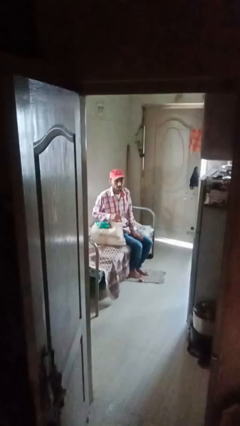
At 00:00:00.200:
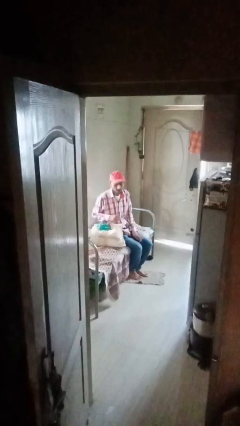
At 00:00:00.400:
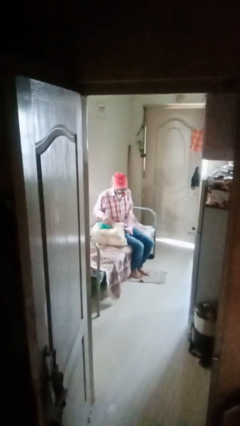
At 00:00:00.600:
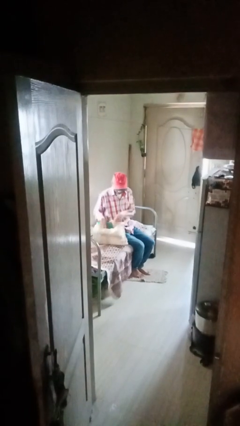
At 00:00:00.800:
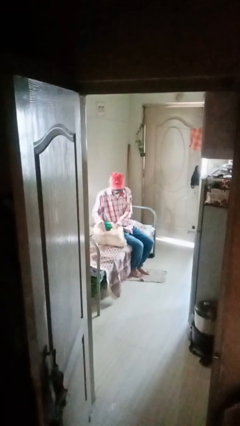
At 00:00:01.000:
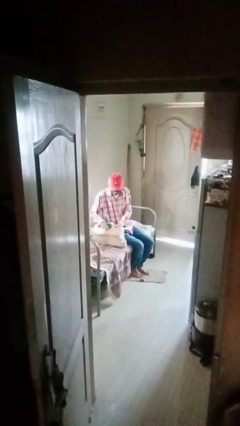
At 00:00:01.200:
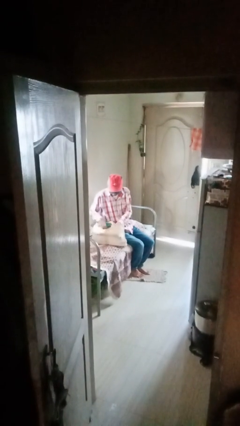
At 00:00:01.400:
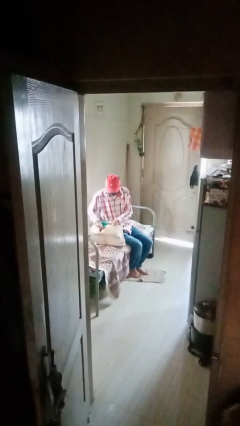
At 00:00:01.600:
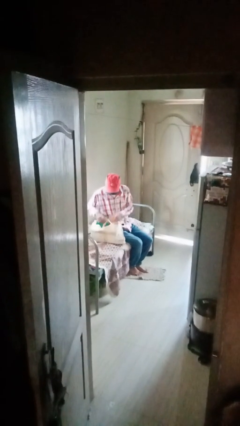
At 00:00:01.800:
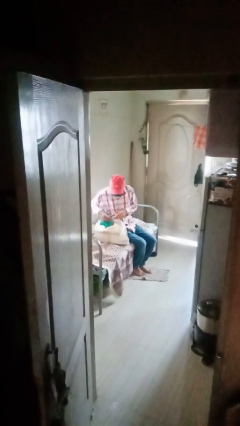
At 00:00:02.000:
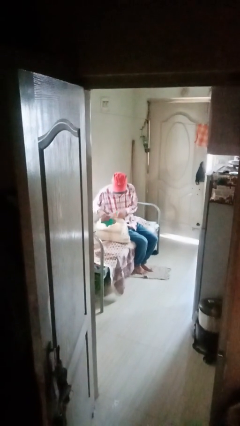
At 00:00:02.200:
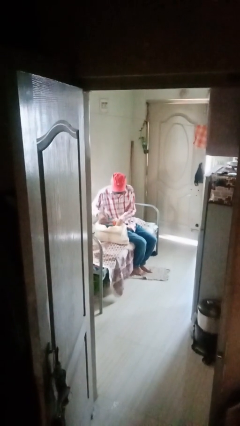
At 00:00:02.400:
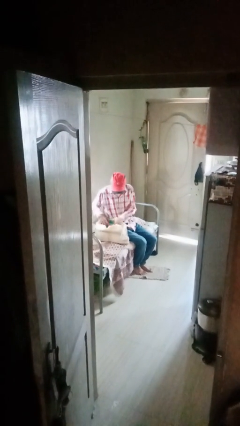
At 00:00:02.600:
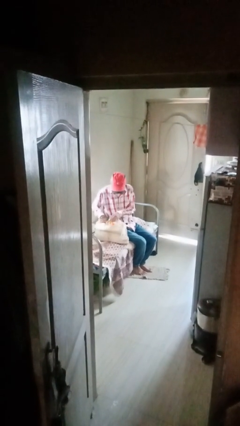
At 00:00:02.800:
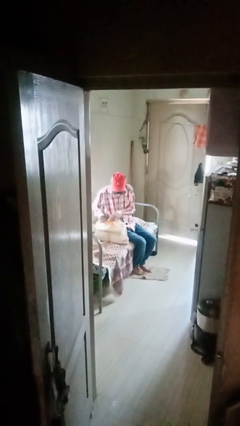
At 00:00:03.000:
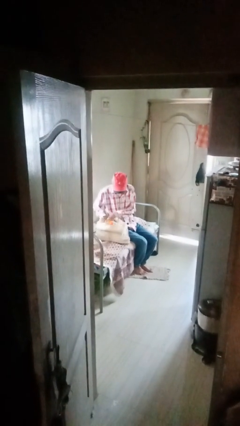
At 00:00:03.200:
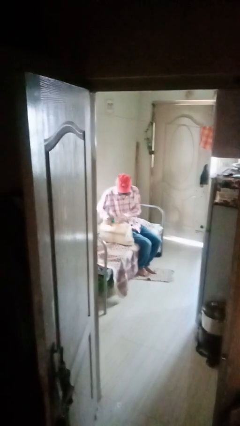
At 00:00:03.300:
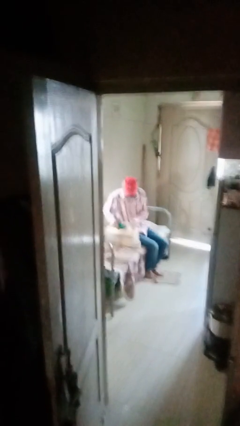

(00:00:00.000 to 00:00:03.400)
person searches in bag

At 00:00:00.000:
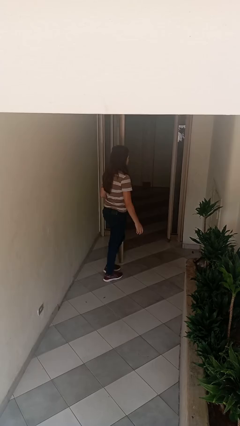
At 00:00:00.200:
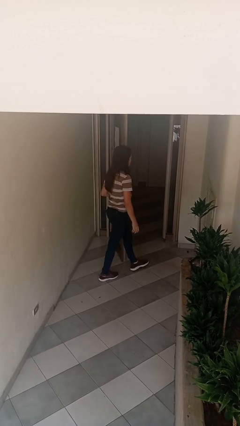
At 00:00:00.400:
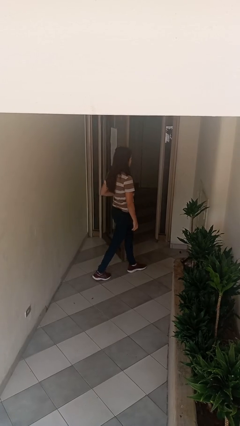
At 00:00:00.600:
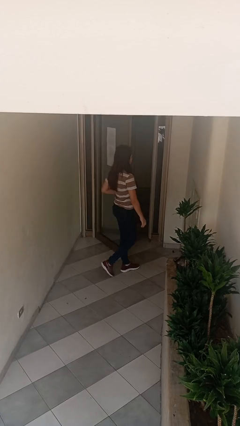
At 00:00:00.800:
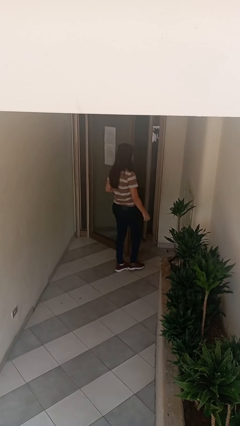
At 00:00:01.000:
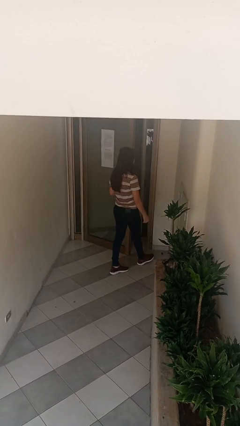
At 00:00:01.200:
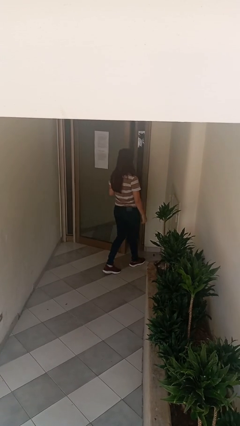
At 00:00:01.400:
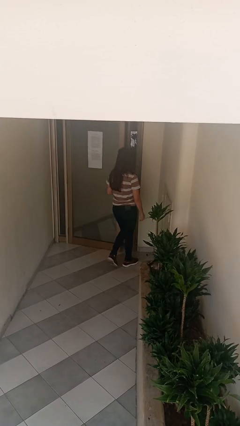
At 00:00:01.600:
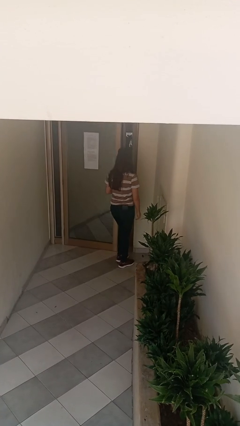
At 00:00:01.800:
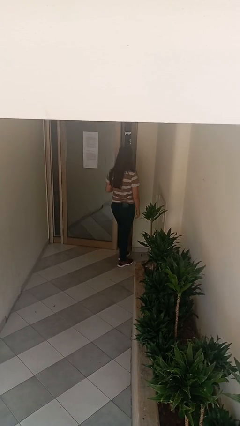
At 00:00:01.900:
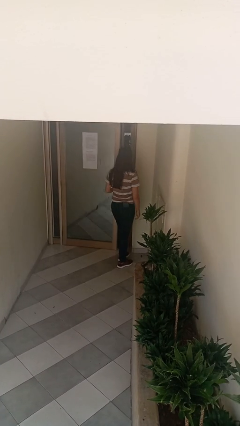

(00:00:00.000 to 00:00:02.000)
person closes facility door

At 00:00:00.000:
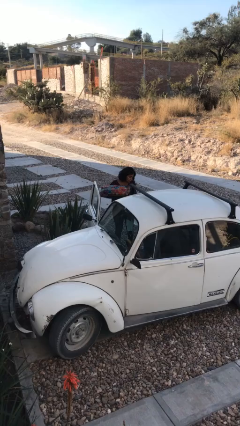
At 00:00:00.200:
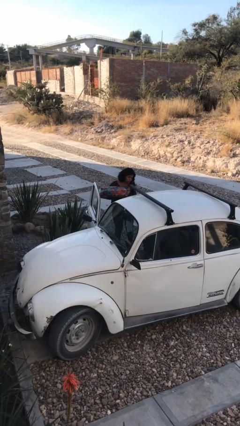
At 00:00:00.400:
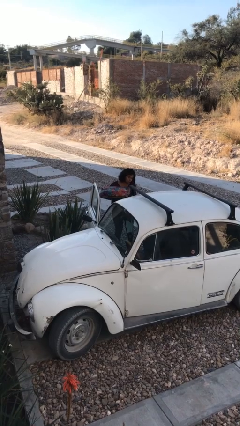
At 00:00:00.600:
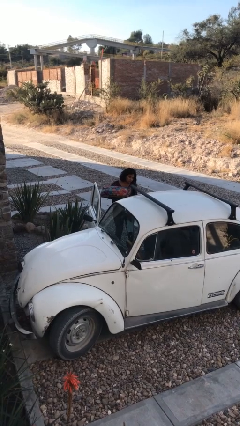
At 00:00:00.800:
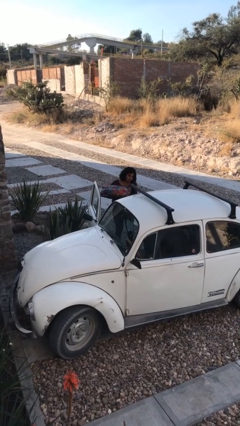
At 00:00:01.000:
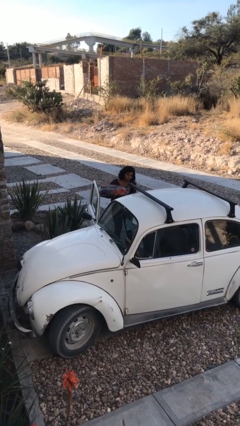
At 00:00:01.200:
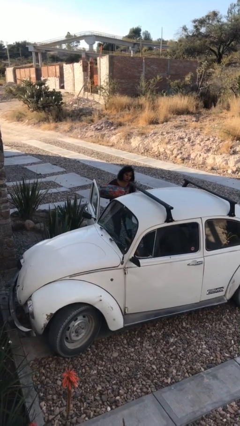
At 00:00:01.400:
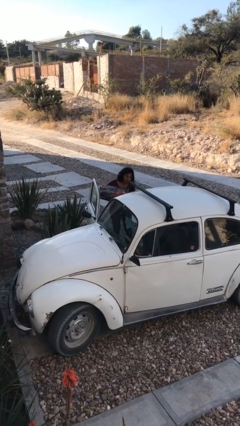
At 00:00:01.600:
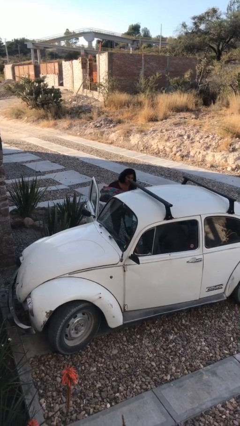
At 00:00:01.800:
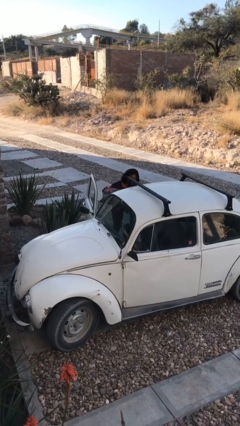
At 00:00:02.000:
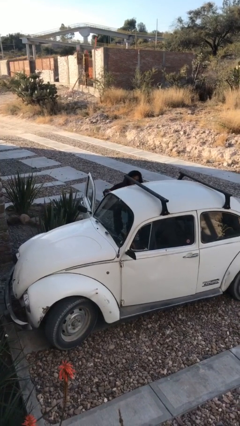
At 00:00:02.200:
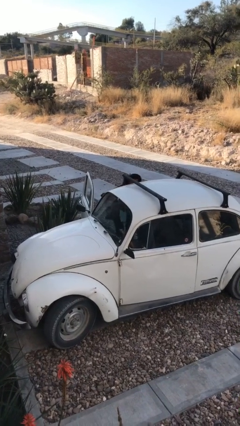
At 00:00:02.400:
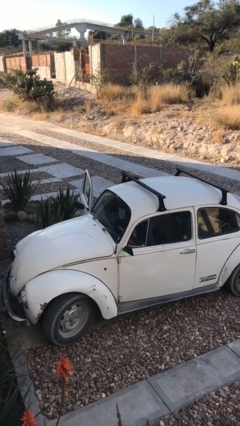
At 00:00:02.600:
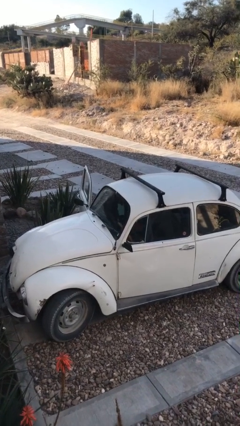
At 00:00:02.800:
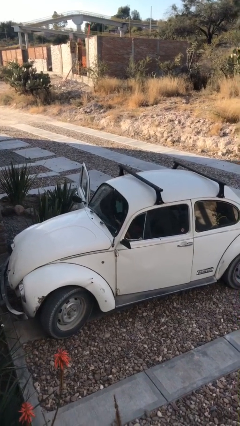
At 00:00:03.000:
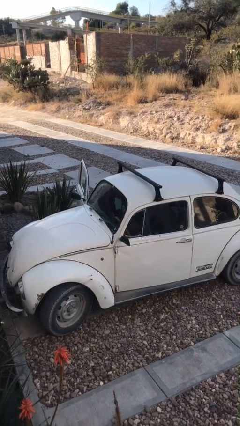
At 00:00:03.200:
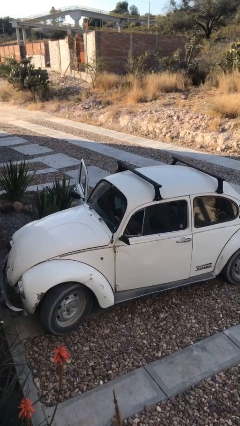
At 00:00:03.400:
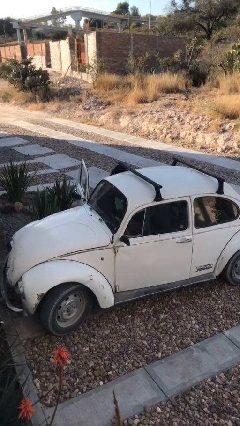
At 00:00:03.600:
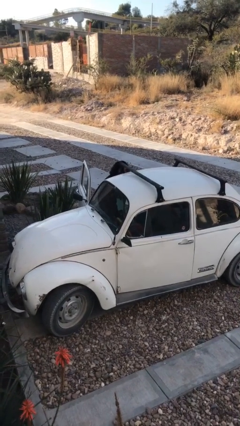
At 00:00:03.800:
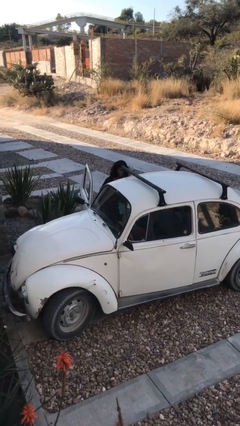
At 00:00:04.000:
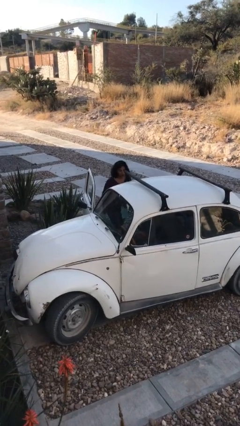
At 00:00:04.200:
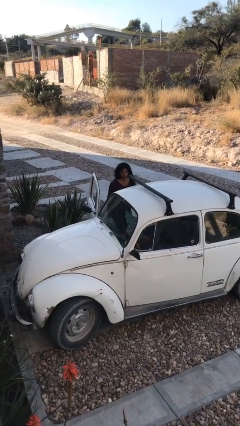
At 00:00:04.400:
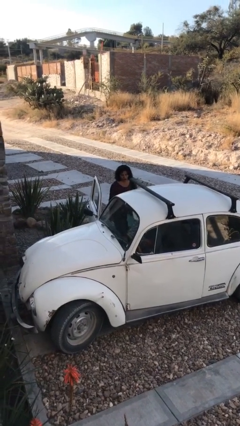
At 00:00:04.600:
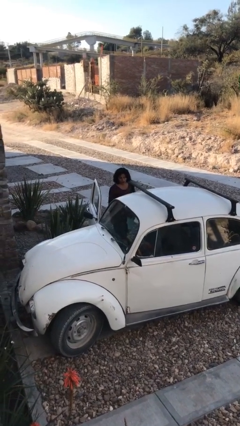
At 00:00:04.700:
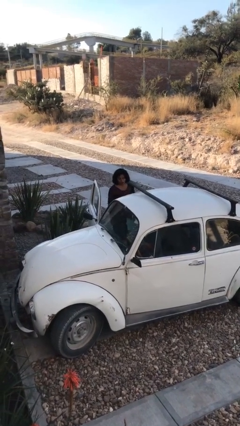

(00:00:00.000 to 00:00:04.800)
person loads car

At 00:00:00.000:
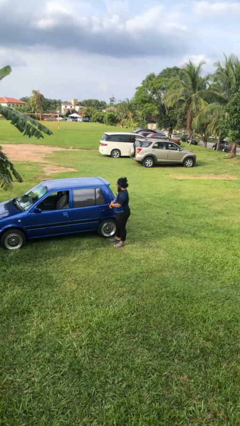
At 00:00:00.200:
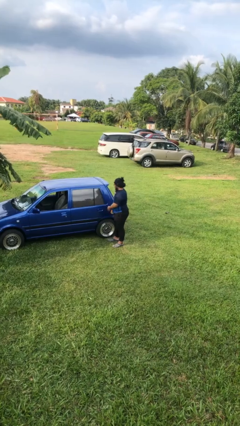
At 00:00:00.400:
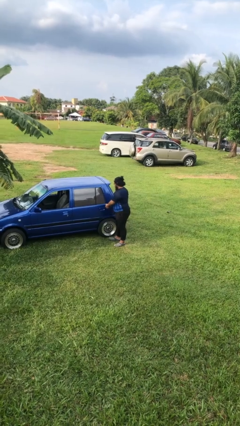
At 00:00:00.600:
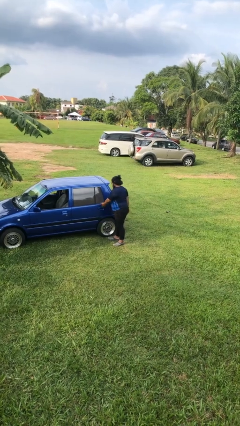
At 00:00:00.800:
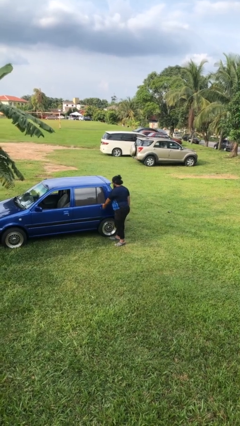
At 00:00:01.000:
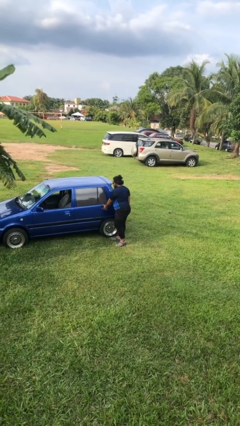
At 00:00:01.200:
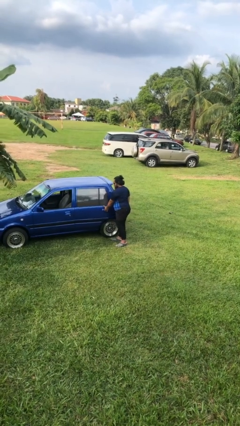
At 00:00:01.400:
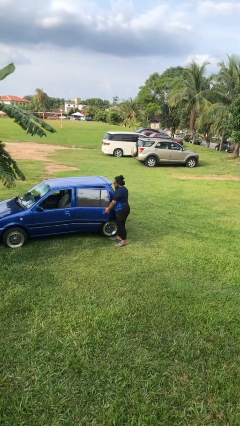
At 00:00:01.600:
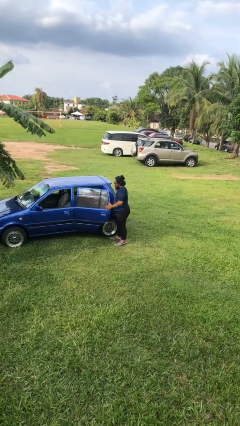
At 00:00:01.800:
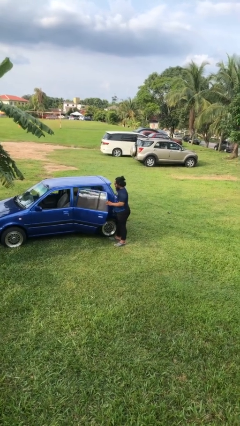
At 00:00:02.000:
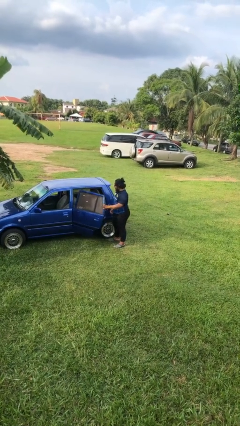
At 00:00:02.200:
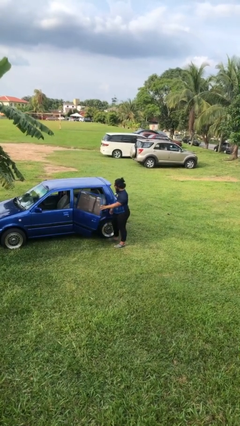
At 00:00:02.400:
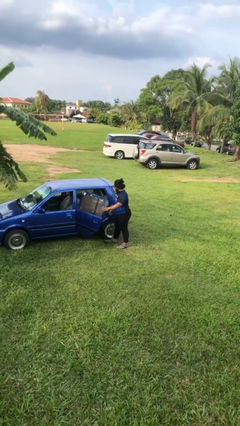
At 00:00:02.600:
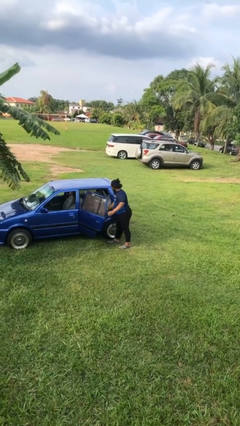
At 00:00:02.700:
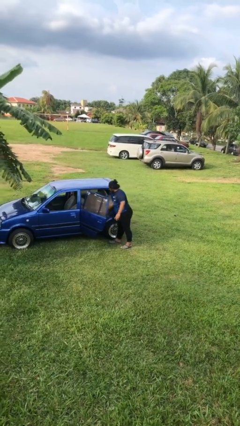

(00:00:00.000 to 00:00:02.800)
person opens car door

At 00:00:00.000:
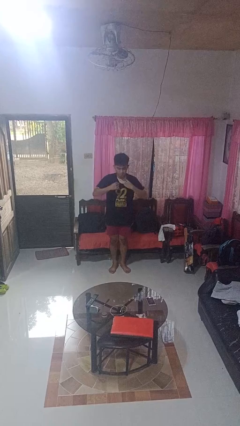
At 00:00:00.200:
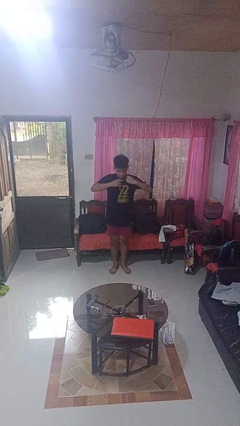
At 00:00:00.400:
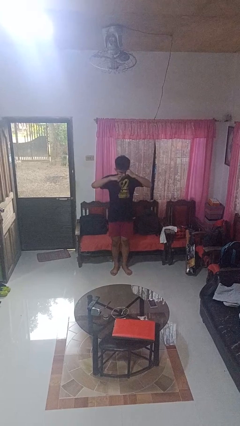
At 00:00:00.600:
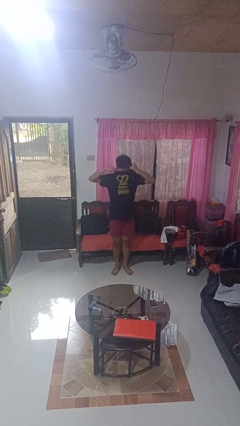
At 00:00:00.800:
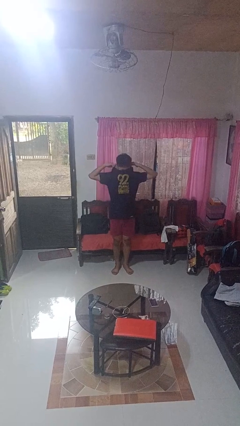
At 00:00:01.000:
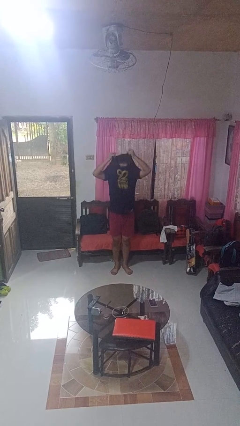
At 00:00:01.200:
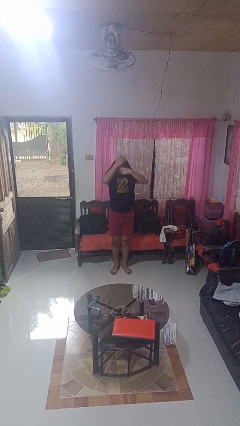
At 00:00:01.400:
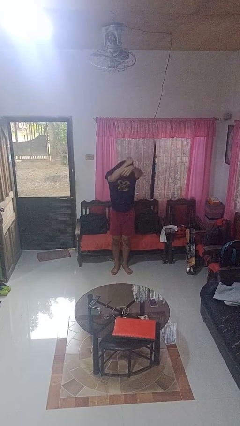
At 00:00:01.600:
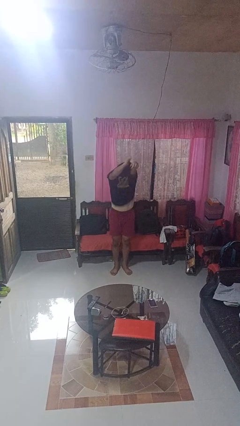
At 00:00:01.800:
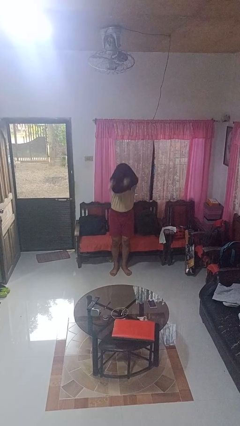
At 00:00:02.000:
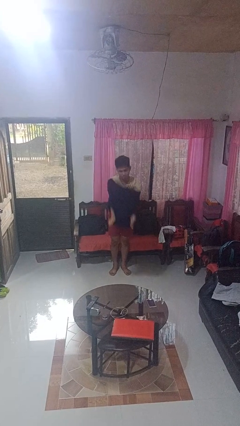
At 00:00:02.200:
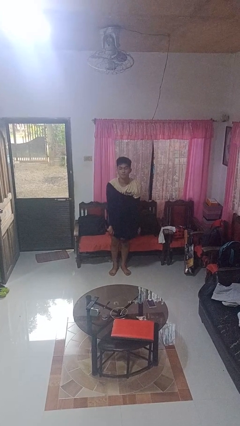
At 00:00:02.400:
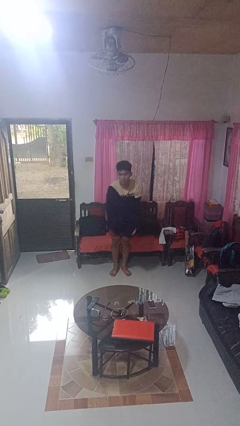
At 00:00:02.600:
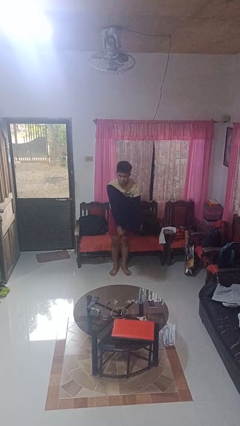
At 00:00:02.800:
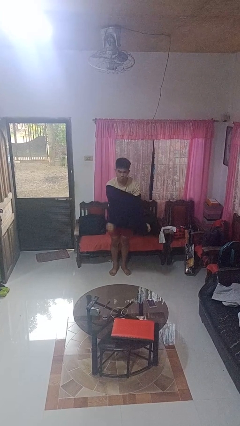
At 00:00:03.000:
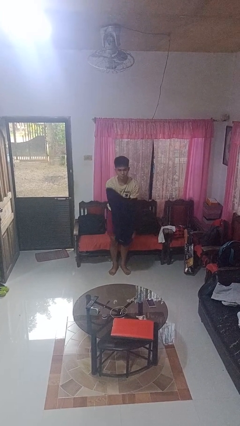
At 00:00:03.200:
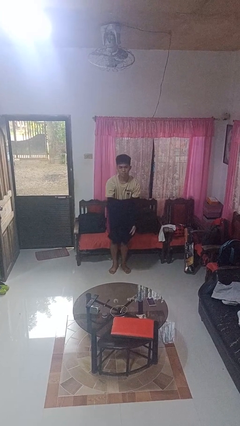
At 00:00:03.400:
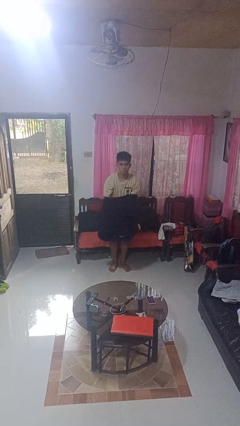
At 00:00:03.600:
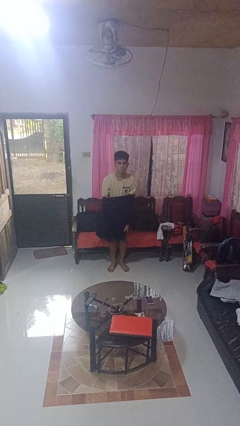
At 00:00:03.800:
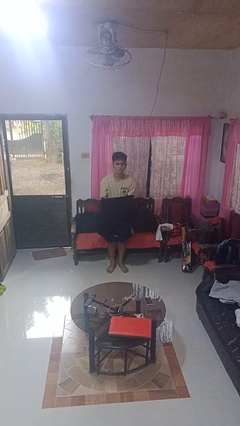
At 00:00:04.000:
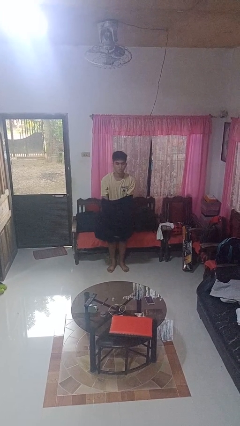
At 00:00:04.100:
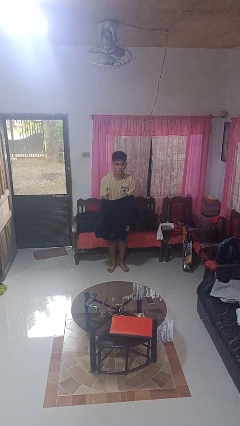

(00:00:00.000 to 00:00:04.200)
person takes off shirt

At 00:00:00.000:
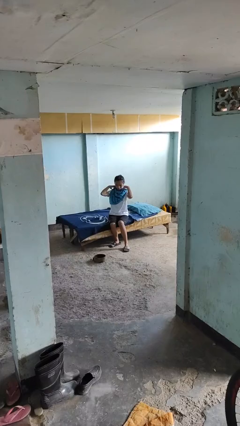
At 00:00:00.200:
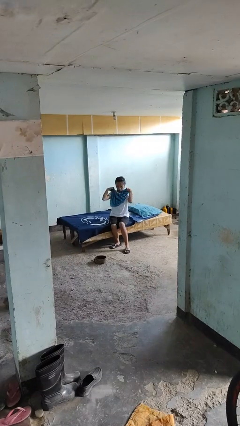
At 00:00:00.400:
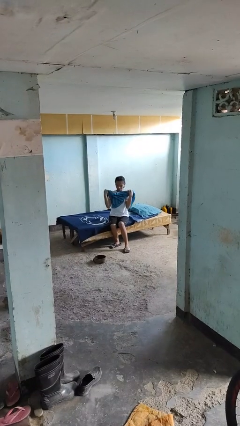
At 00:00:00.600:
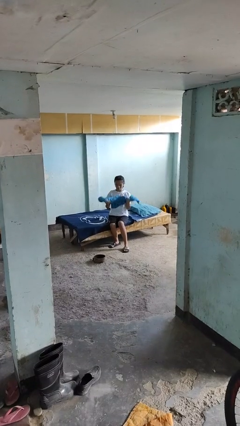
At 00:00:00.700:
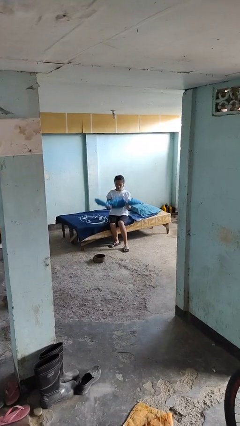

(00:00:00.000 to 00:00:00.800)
person takes off scarf
